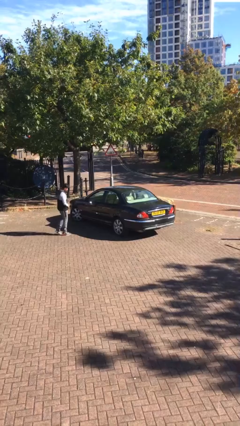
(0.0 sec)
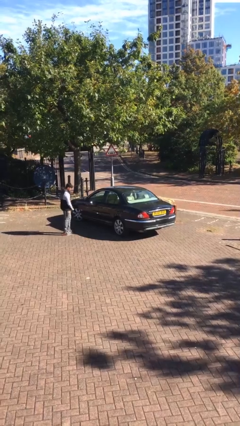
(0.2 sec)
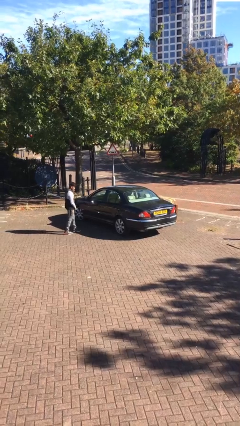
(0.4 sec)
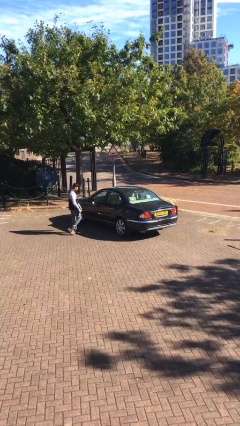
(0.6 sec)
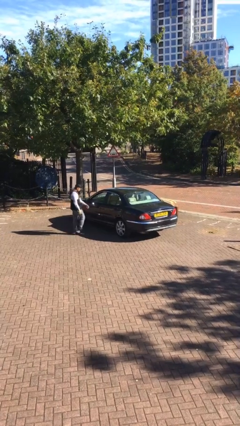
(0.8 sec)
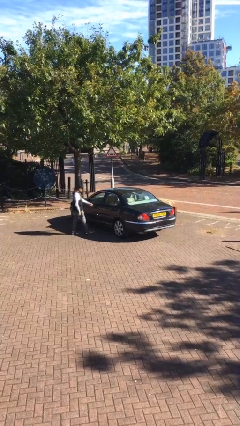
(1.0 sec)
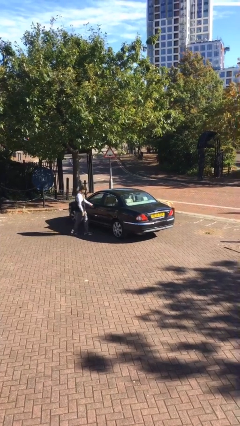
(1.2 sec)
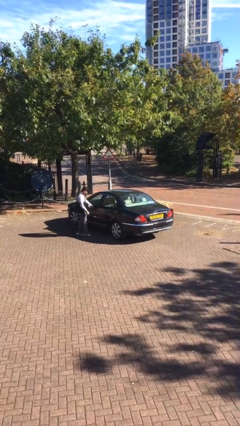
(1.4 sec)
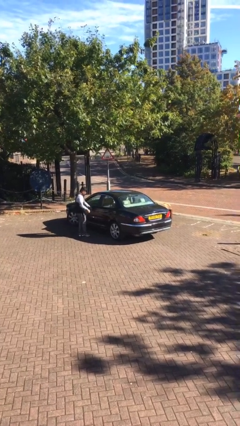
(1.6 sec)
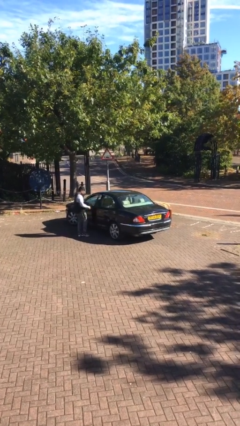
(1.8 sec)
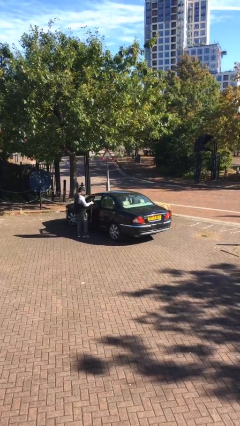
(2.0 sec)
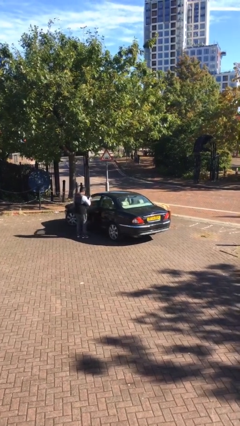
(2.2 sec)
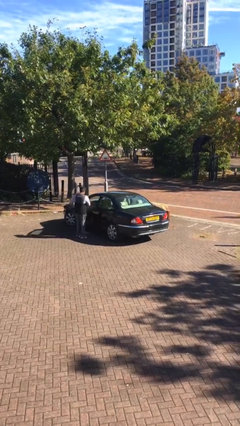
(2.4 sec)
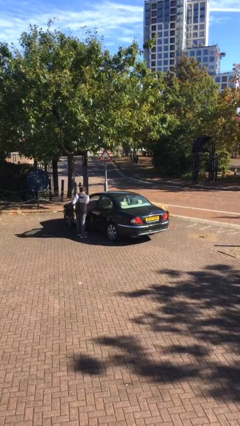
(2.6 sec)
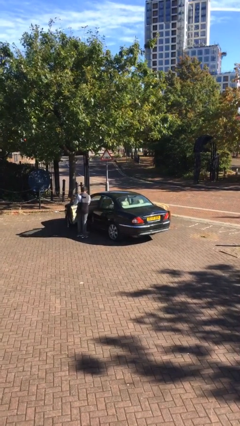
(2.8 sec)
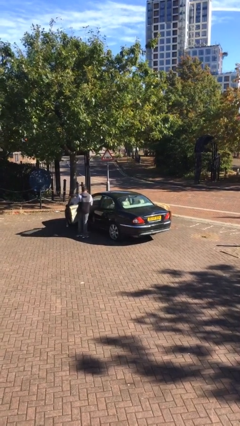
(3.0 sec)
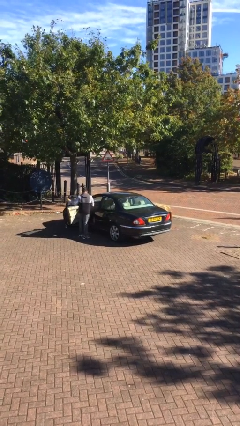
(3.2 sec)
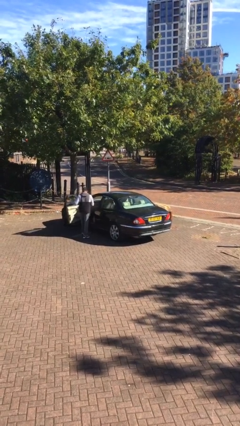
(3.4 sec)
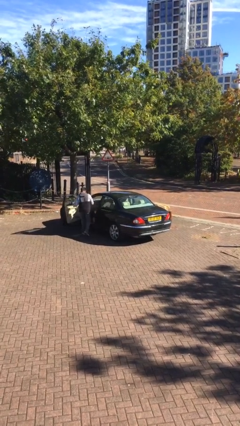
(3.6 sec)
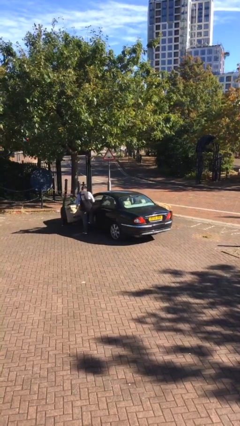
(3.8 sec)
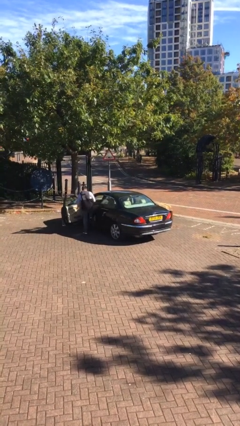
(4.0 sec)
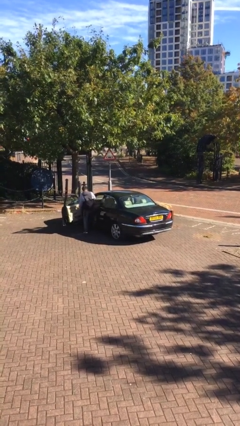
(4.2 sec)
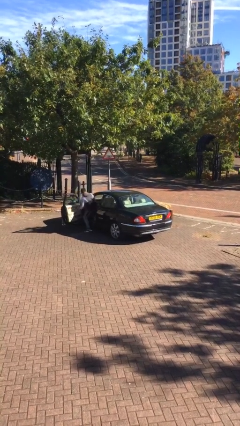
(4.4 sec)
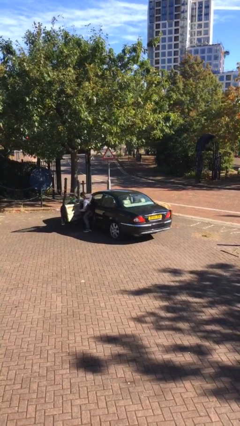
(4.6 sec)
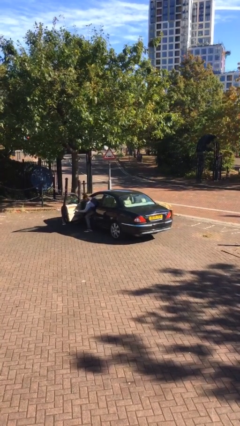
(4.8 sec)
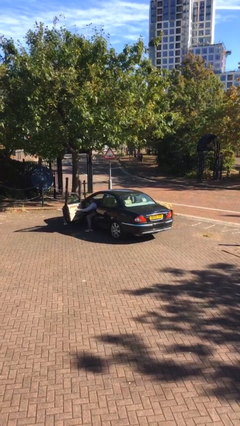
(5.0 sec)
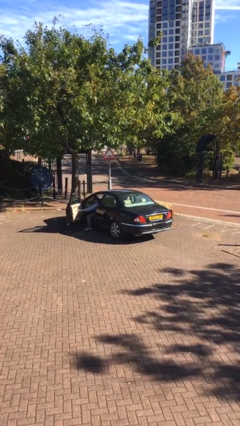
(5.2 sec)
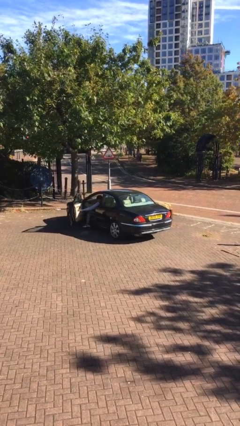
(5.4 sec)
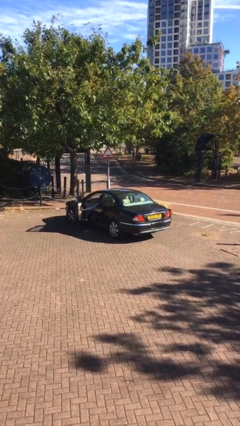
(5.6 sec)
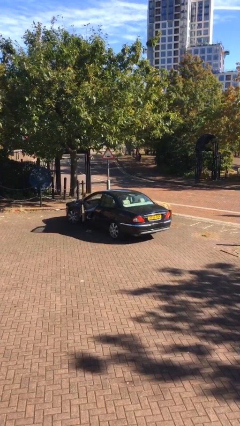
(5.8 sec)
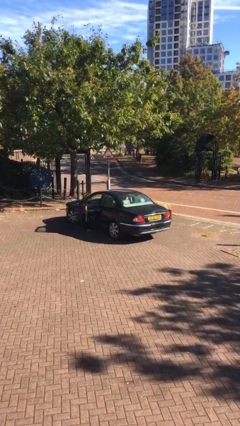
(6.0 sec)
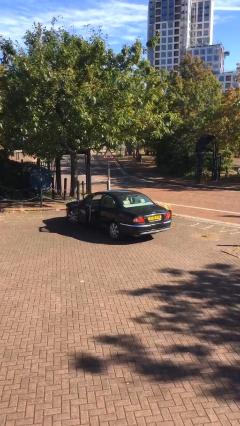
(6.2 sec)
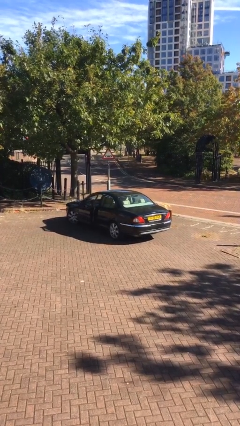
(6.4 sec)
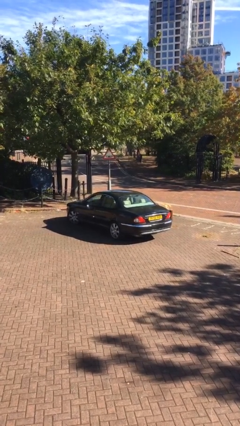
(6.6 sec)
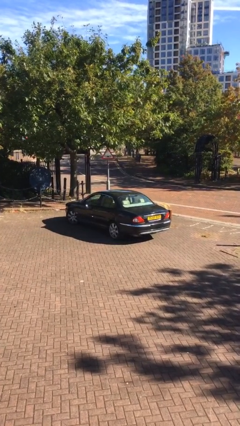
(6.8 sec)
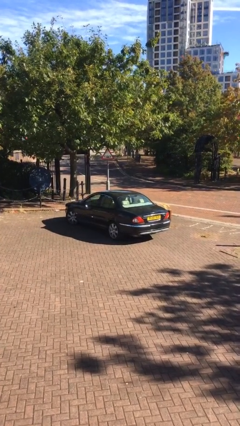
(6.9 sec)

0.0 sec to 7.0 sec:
car picks up person

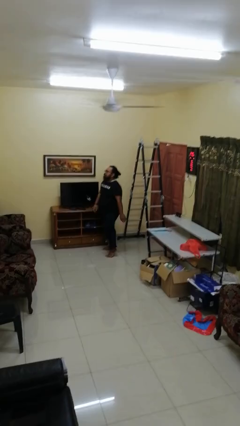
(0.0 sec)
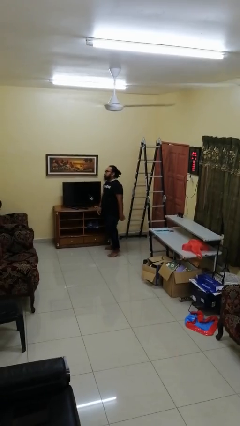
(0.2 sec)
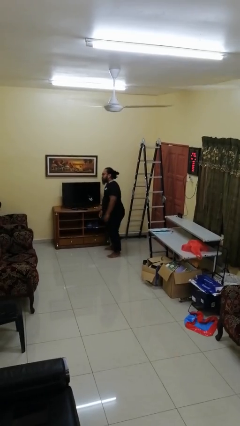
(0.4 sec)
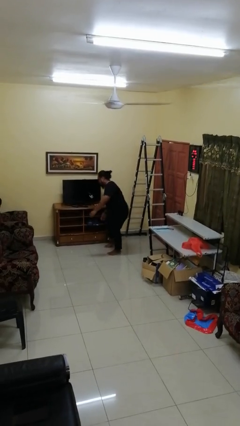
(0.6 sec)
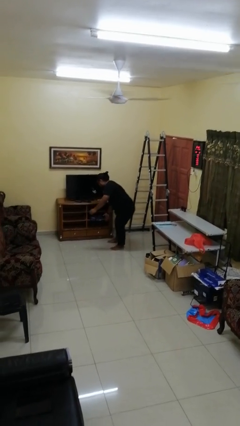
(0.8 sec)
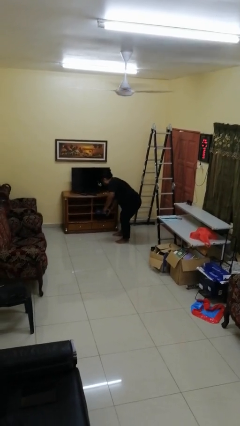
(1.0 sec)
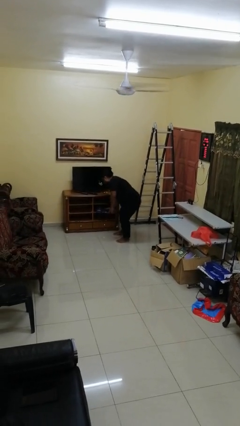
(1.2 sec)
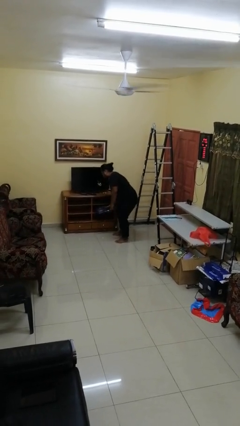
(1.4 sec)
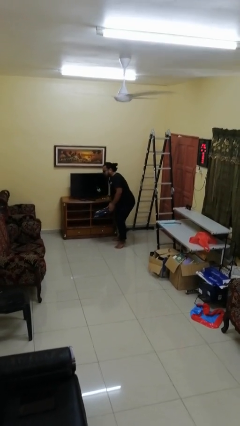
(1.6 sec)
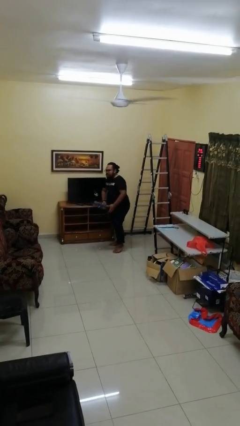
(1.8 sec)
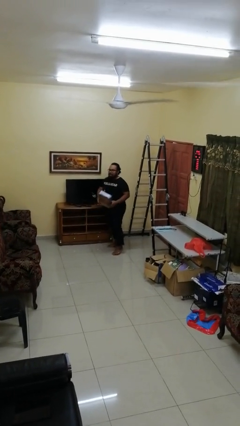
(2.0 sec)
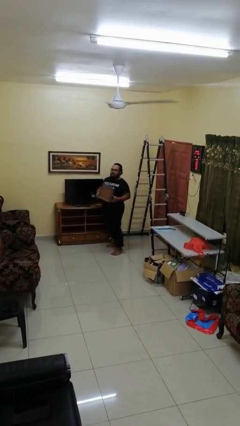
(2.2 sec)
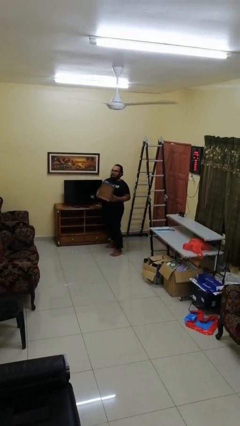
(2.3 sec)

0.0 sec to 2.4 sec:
person picks up object from cabinet

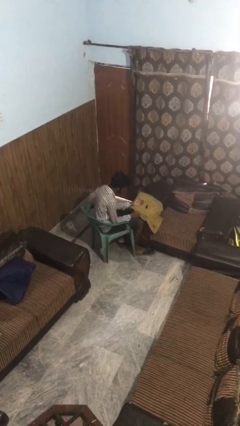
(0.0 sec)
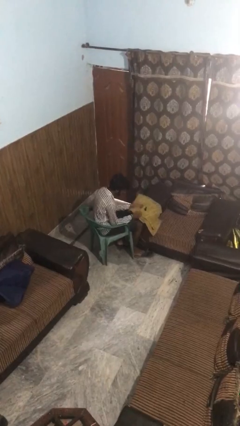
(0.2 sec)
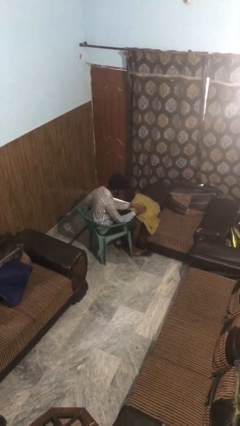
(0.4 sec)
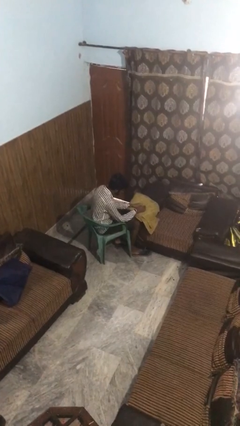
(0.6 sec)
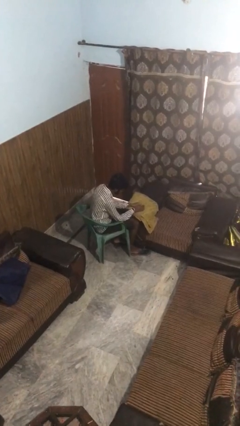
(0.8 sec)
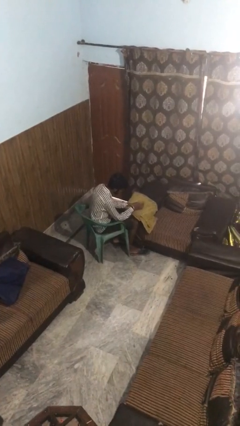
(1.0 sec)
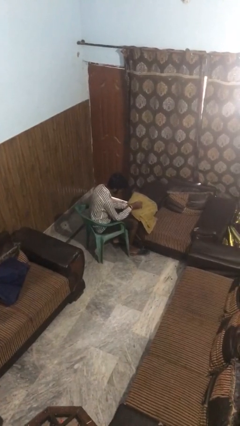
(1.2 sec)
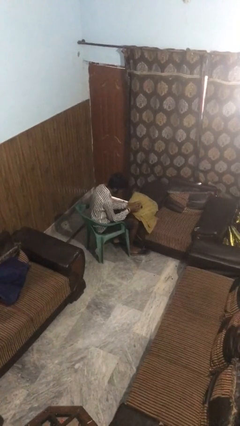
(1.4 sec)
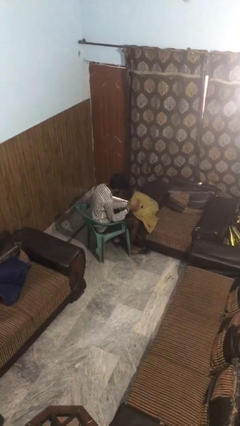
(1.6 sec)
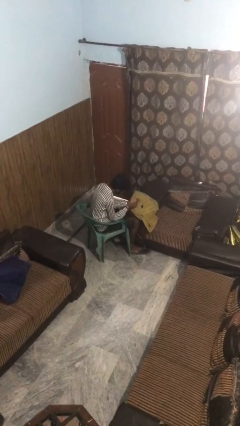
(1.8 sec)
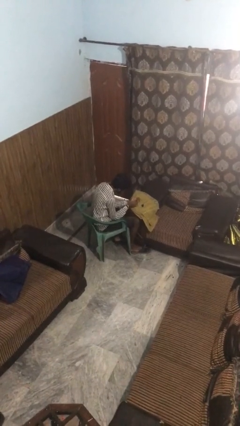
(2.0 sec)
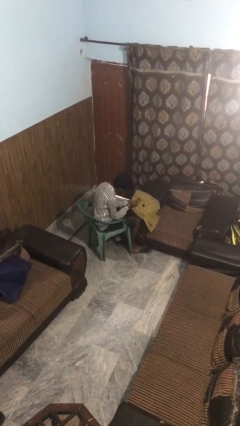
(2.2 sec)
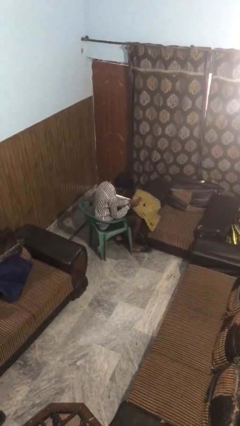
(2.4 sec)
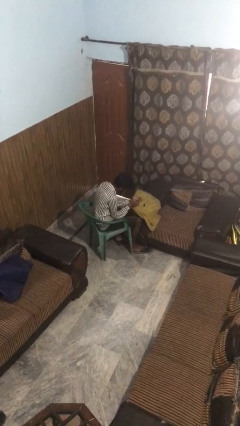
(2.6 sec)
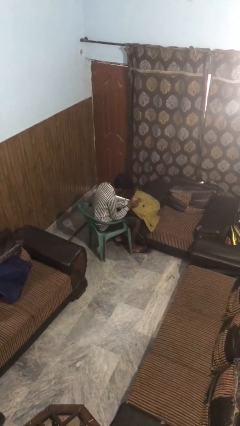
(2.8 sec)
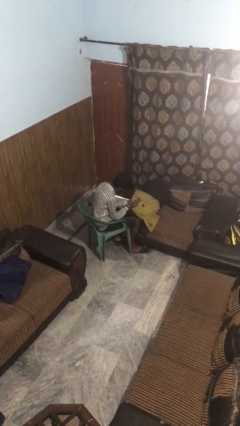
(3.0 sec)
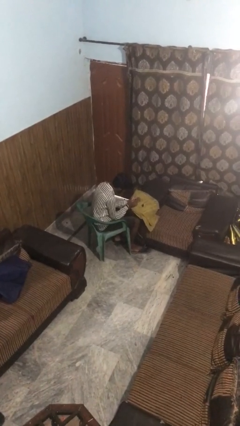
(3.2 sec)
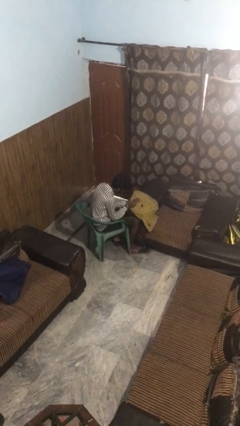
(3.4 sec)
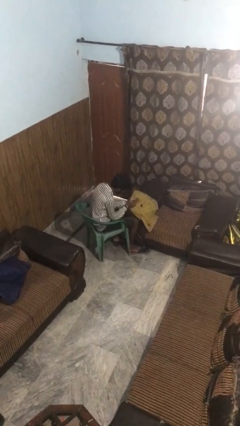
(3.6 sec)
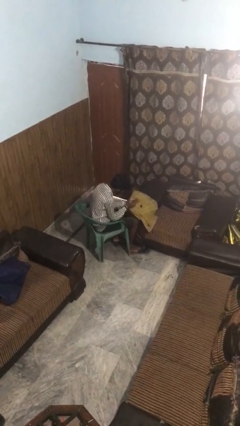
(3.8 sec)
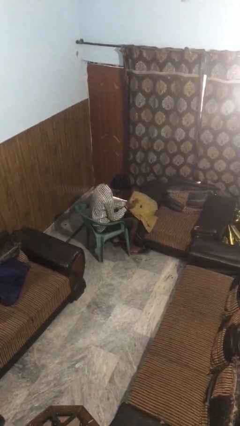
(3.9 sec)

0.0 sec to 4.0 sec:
person paints fingernails

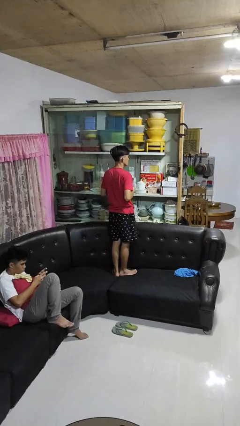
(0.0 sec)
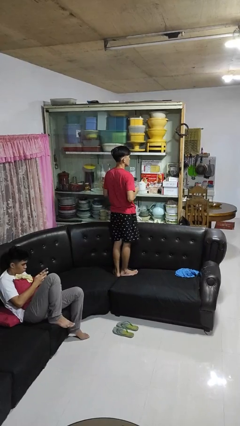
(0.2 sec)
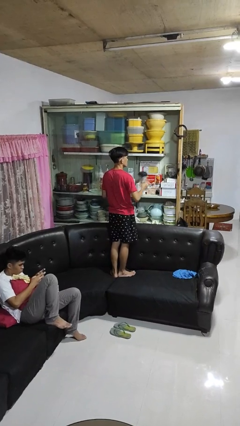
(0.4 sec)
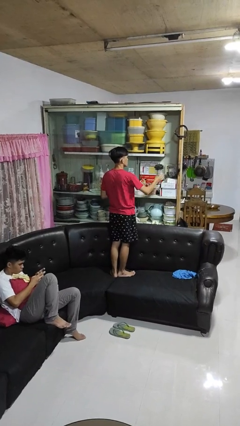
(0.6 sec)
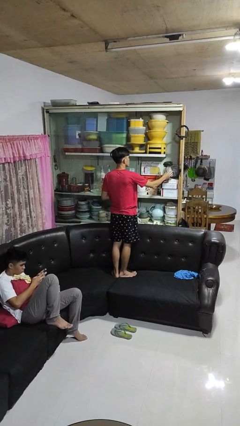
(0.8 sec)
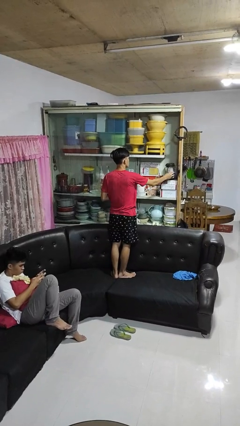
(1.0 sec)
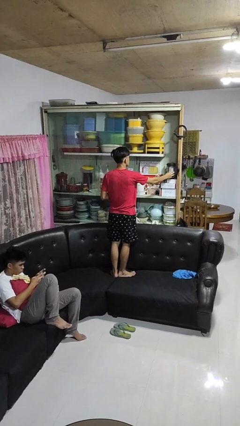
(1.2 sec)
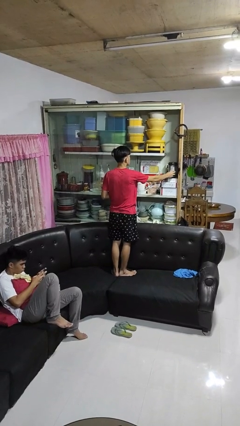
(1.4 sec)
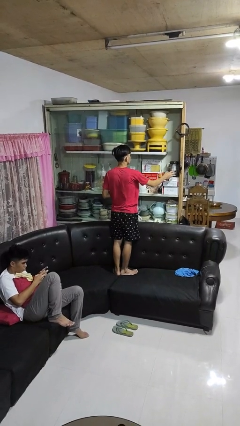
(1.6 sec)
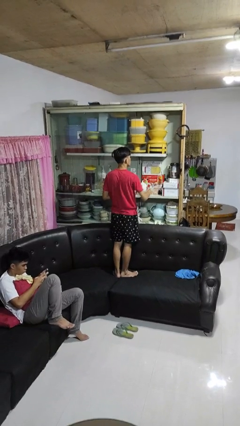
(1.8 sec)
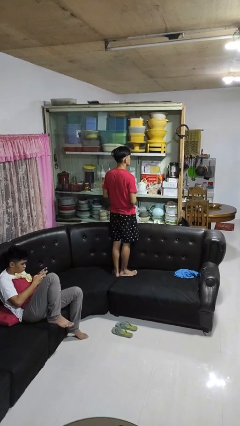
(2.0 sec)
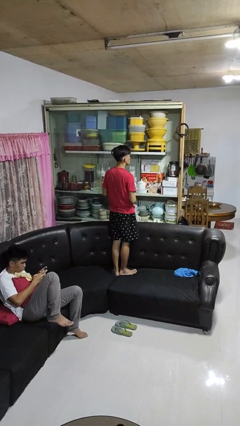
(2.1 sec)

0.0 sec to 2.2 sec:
person puts down object into cabinet

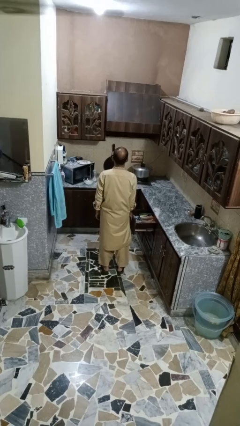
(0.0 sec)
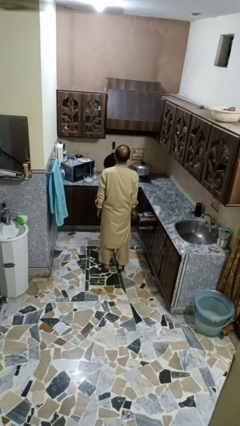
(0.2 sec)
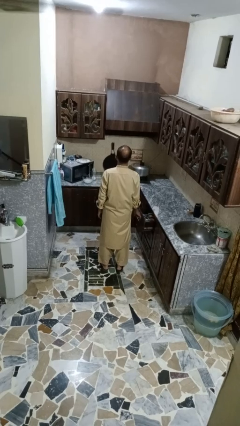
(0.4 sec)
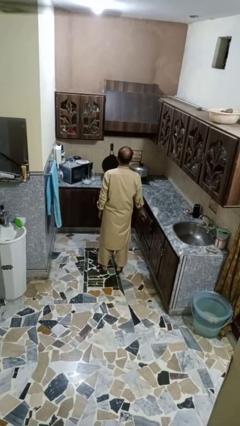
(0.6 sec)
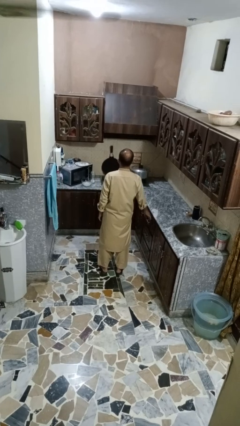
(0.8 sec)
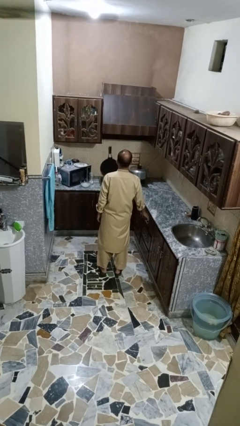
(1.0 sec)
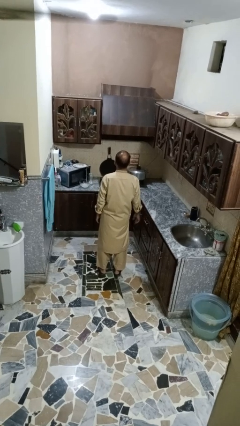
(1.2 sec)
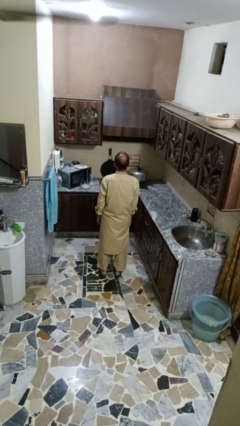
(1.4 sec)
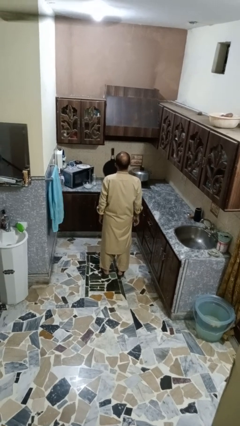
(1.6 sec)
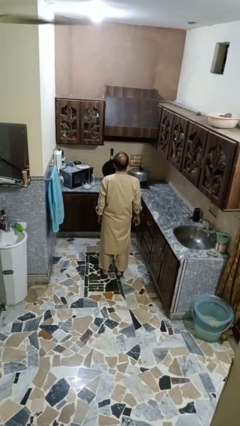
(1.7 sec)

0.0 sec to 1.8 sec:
person closes kitchen drawer
